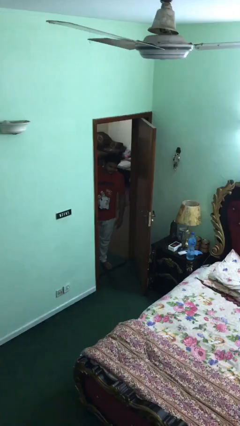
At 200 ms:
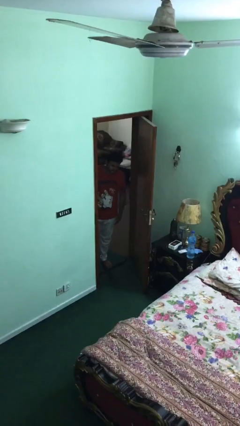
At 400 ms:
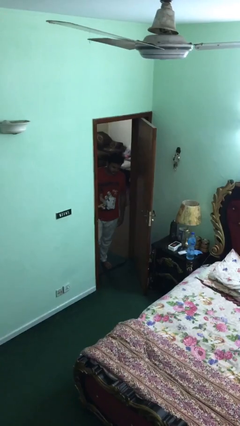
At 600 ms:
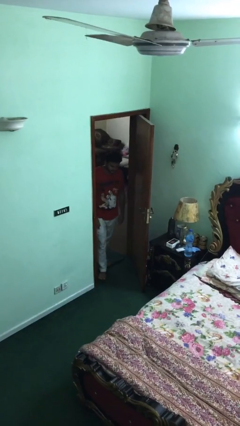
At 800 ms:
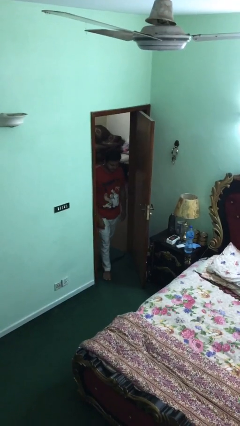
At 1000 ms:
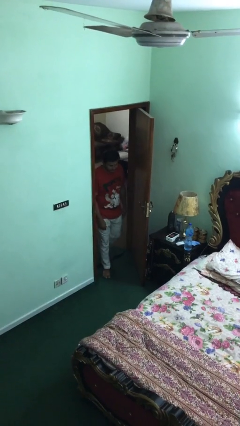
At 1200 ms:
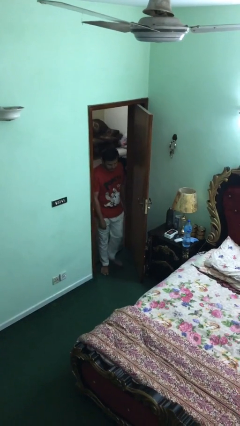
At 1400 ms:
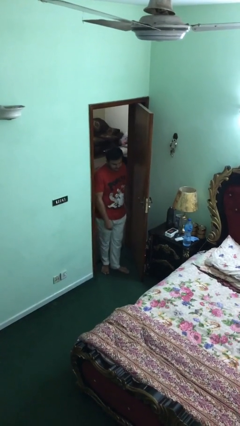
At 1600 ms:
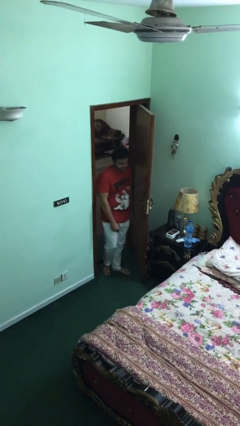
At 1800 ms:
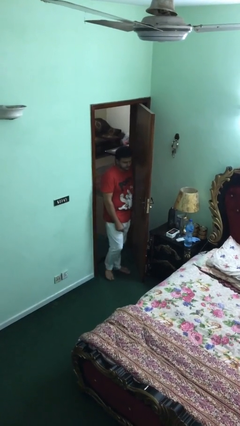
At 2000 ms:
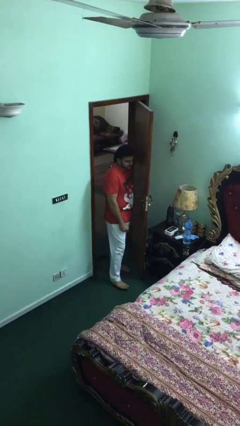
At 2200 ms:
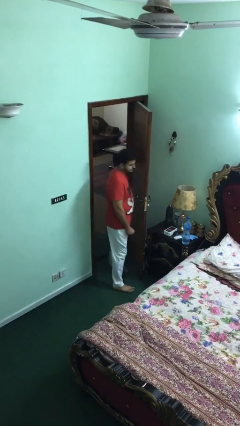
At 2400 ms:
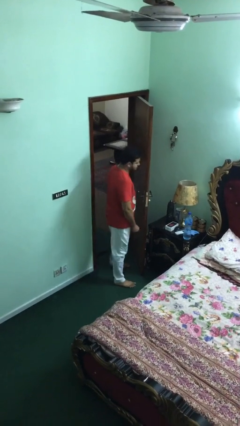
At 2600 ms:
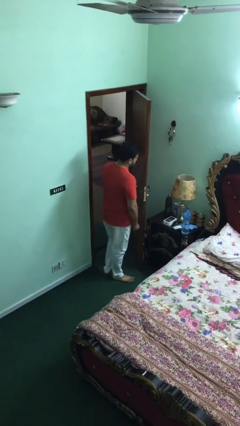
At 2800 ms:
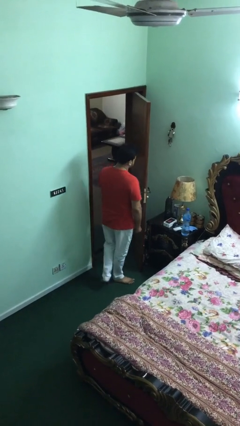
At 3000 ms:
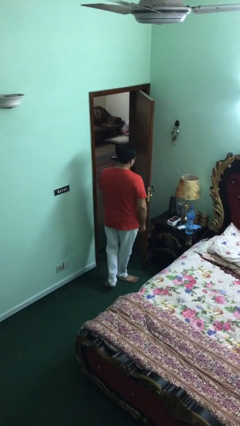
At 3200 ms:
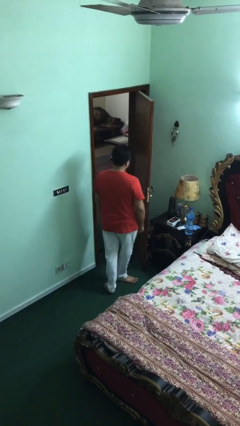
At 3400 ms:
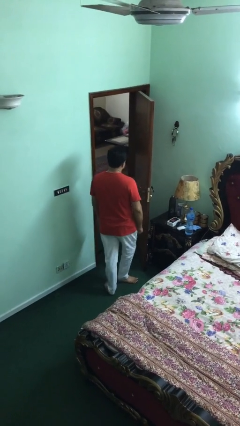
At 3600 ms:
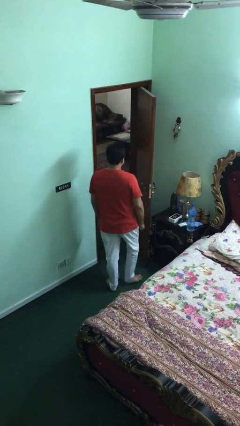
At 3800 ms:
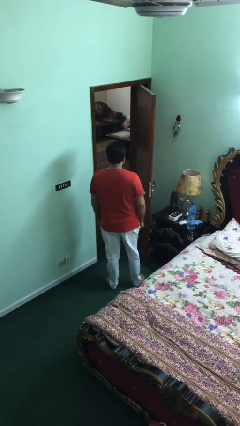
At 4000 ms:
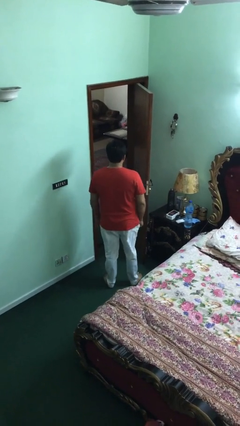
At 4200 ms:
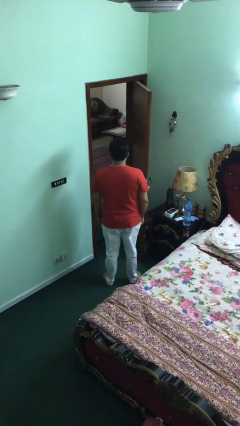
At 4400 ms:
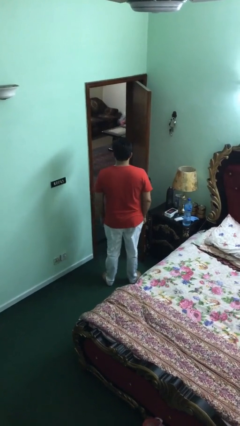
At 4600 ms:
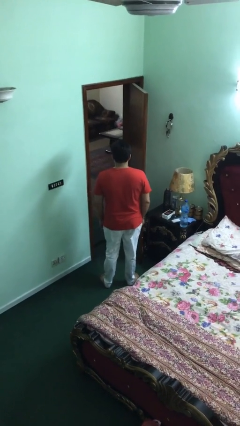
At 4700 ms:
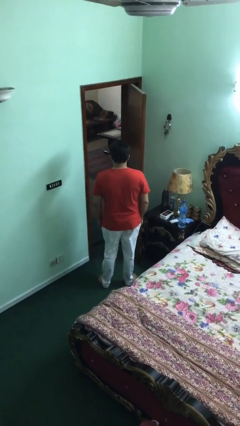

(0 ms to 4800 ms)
person enters scene through structure

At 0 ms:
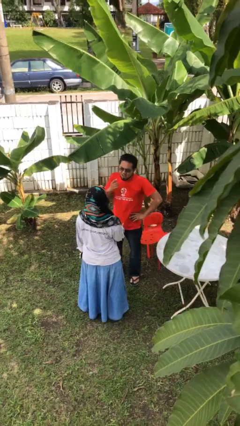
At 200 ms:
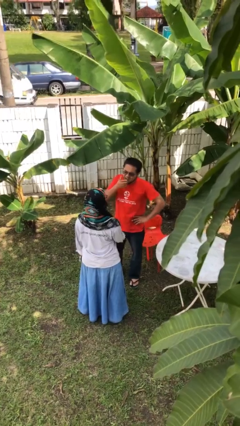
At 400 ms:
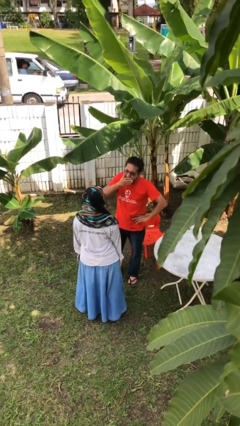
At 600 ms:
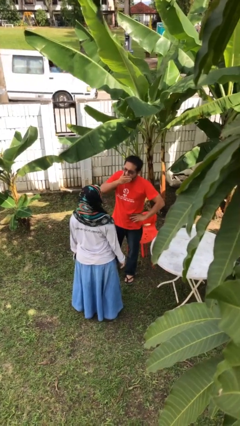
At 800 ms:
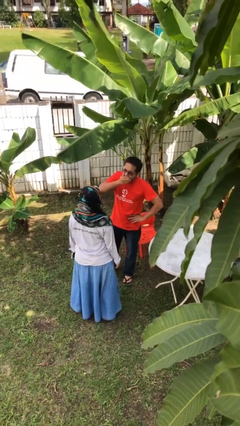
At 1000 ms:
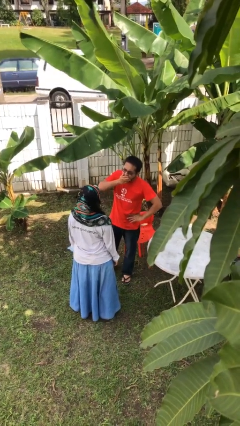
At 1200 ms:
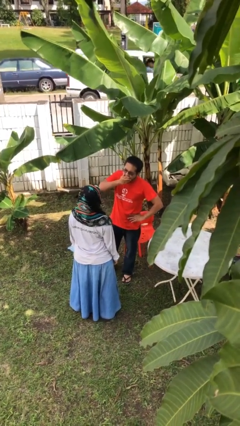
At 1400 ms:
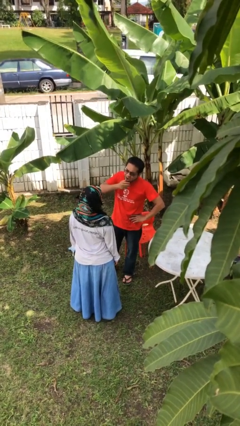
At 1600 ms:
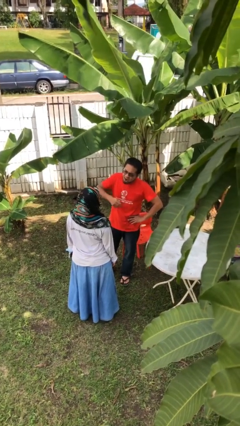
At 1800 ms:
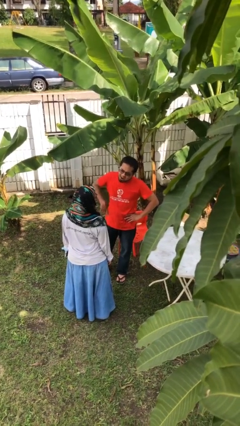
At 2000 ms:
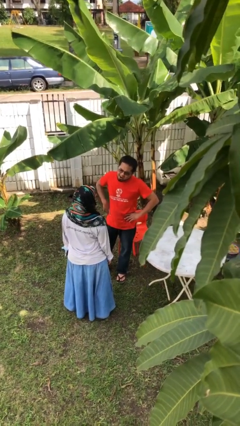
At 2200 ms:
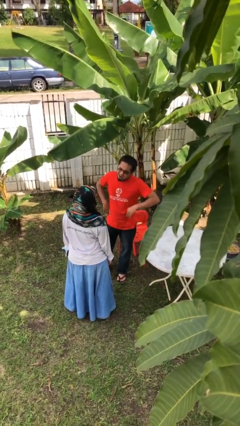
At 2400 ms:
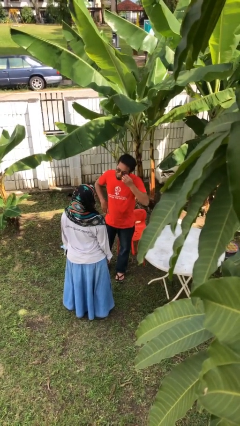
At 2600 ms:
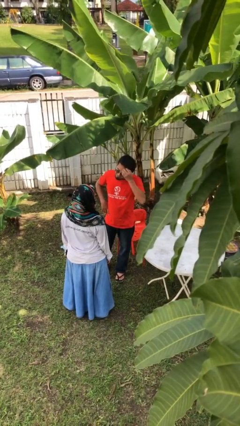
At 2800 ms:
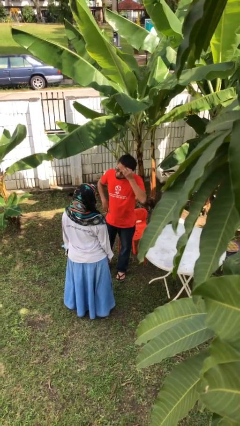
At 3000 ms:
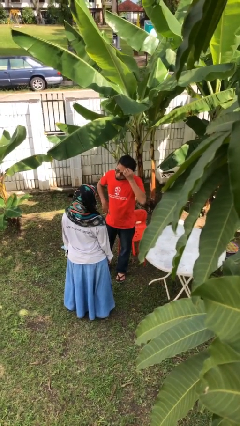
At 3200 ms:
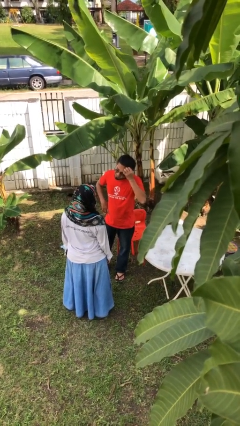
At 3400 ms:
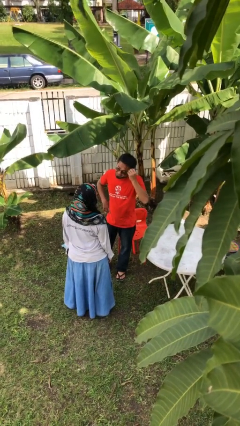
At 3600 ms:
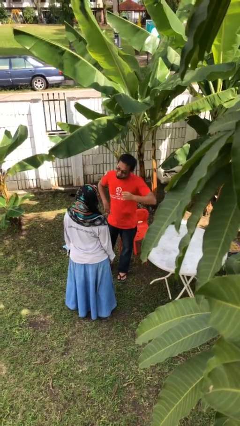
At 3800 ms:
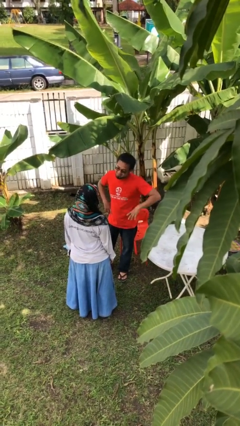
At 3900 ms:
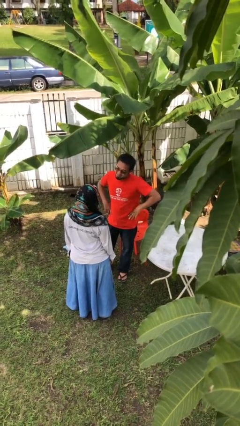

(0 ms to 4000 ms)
person talks to person

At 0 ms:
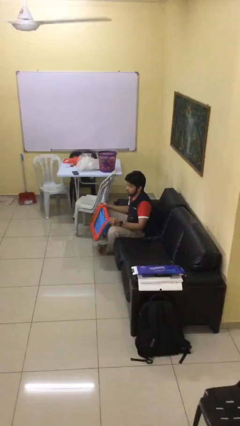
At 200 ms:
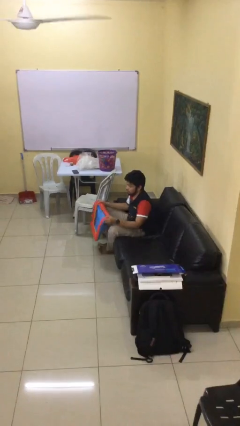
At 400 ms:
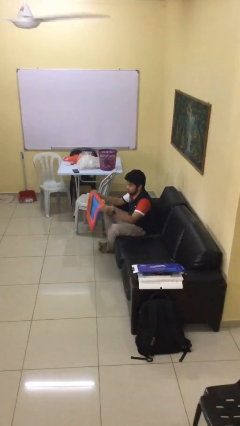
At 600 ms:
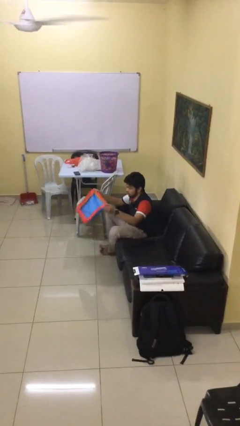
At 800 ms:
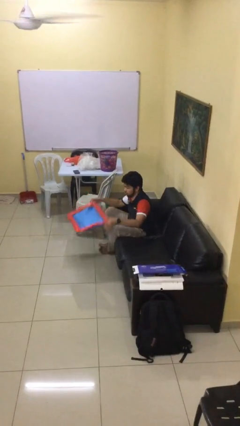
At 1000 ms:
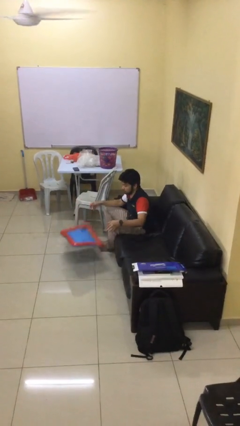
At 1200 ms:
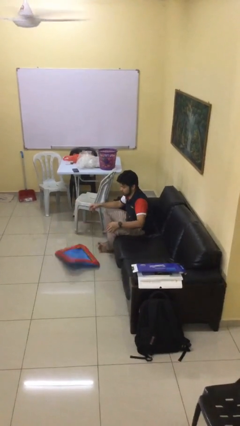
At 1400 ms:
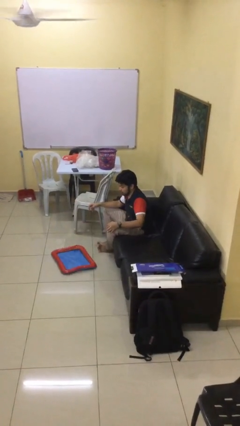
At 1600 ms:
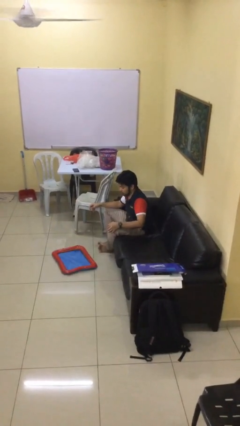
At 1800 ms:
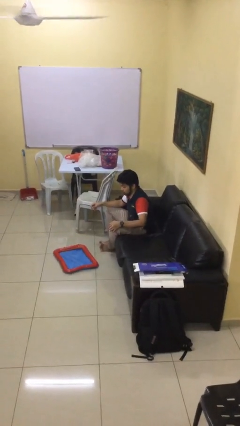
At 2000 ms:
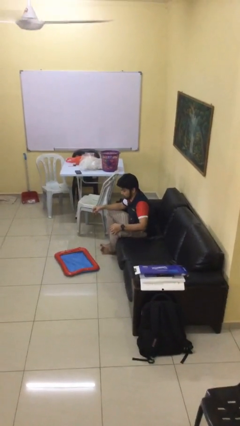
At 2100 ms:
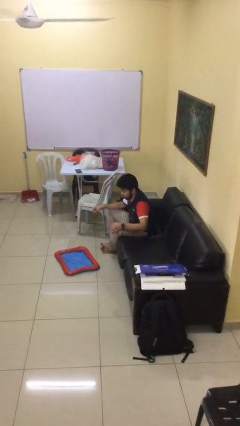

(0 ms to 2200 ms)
person drops object

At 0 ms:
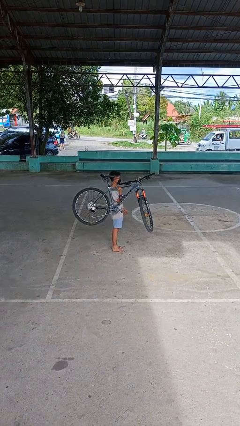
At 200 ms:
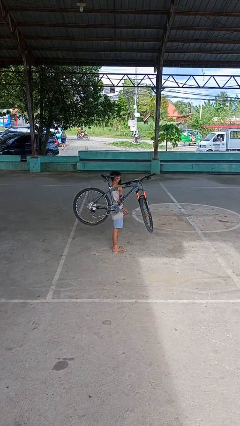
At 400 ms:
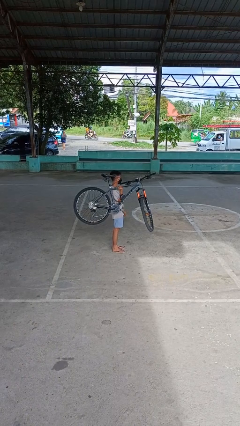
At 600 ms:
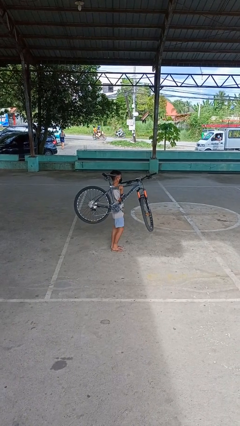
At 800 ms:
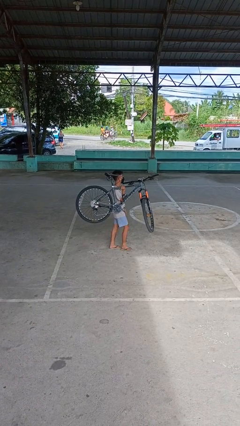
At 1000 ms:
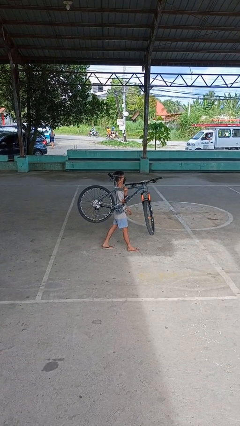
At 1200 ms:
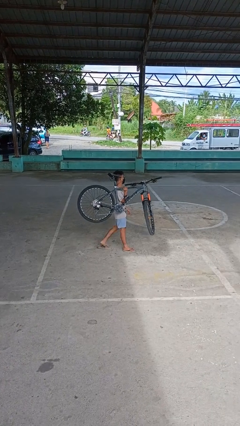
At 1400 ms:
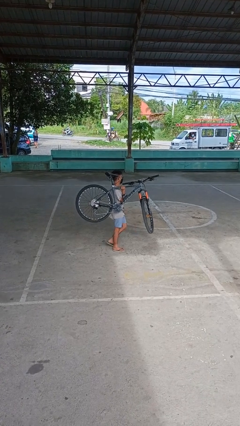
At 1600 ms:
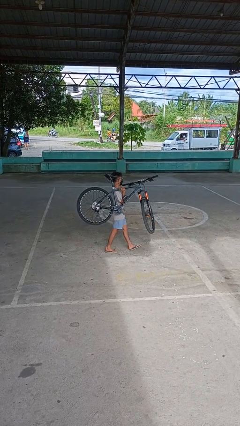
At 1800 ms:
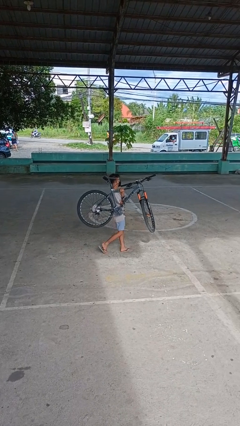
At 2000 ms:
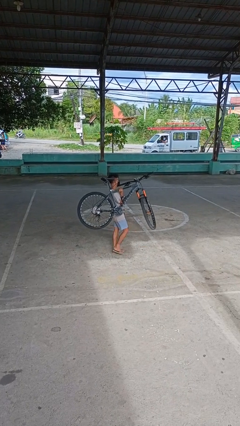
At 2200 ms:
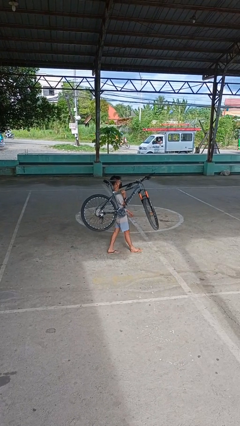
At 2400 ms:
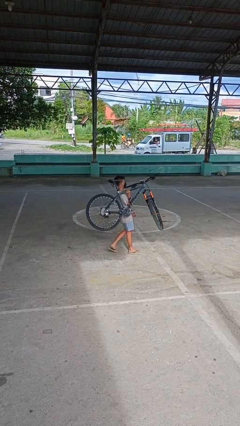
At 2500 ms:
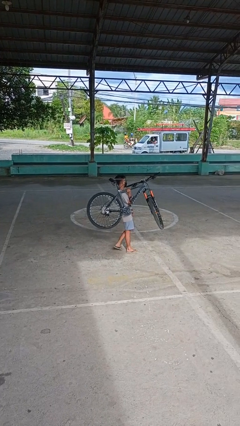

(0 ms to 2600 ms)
person carries bicycle

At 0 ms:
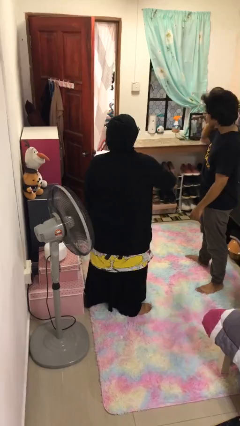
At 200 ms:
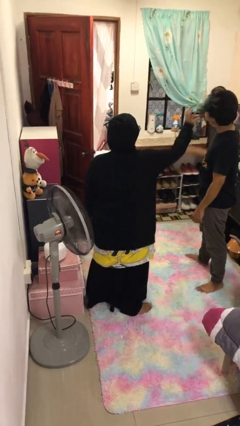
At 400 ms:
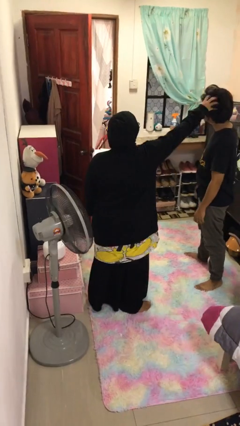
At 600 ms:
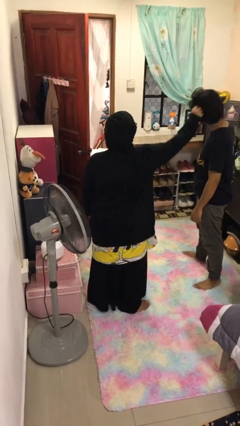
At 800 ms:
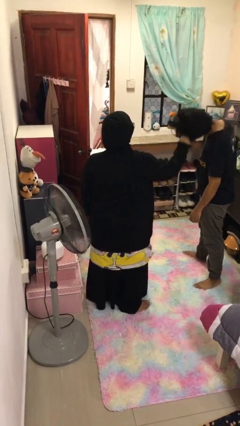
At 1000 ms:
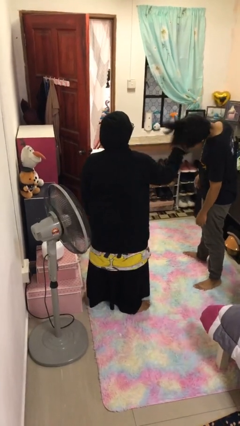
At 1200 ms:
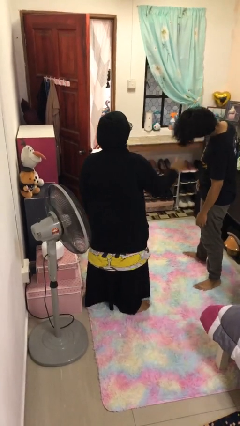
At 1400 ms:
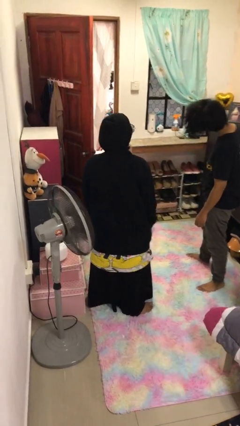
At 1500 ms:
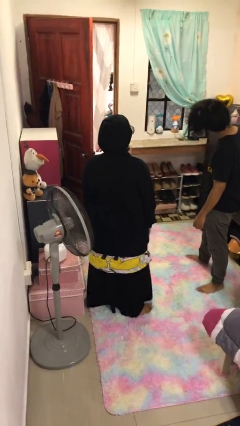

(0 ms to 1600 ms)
person grabs person by hair

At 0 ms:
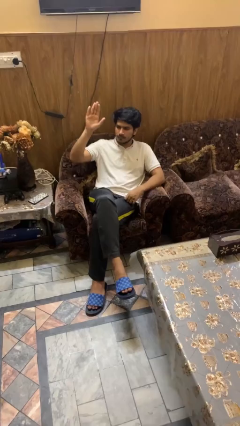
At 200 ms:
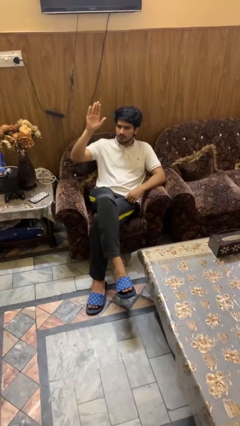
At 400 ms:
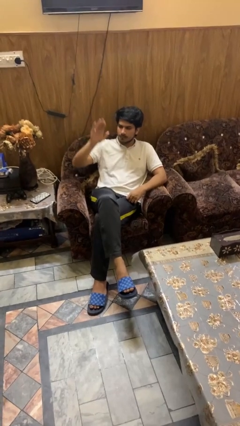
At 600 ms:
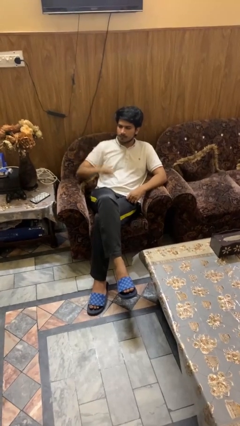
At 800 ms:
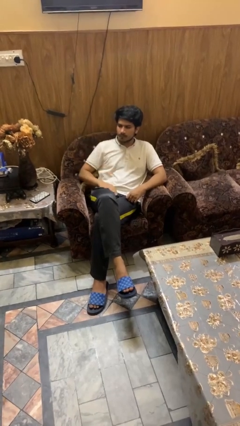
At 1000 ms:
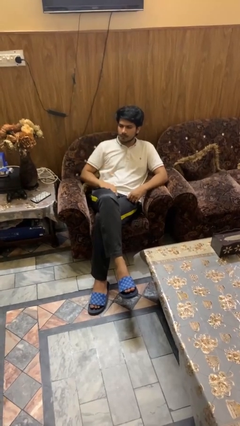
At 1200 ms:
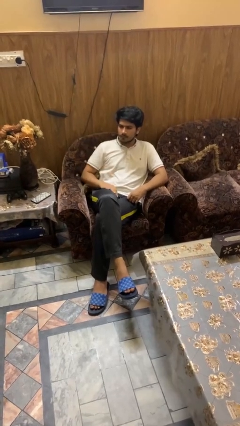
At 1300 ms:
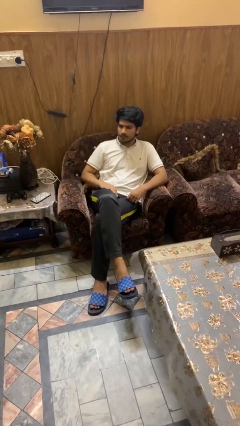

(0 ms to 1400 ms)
person gestures lower hand

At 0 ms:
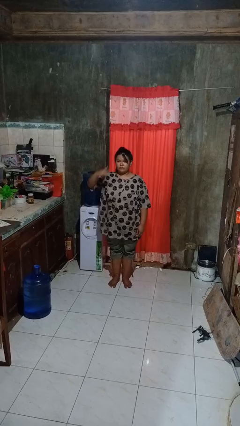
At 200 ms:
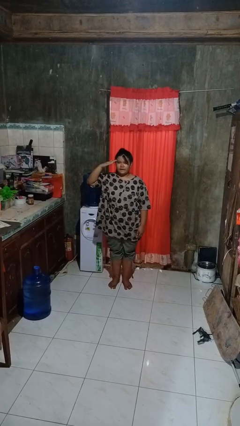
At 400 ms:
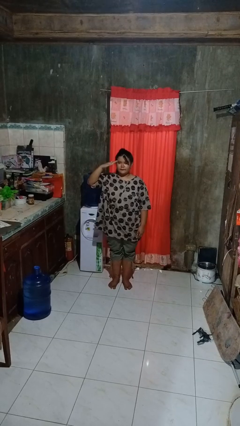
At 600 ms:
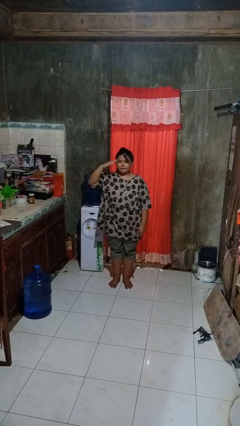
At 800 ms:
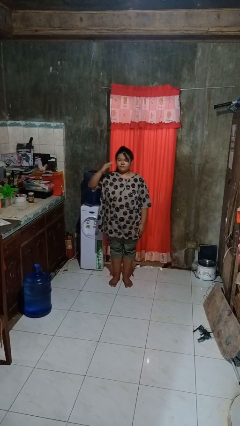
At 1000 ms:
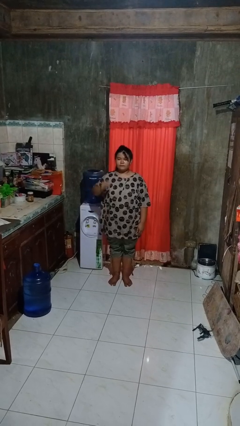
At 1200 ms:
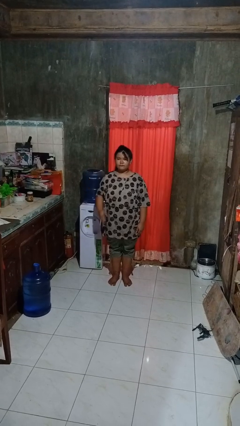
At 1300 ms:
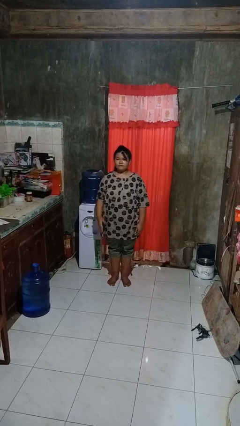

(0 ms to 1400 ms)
person salutes
